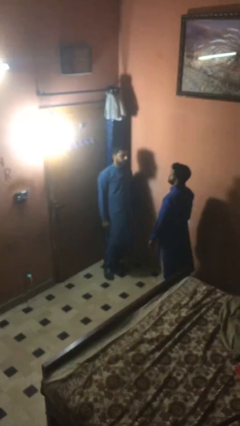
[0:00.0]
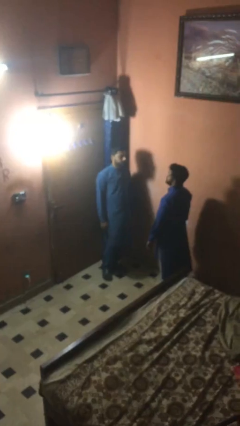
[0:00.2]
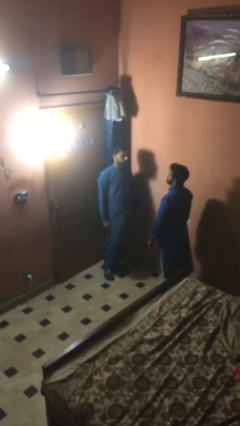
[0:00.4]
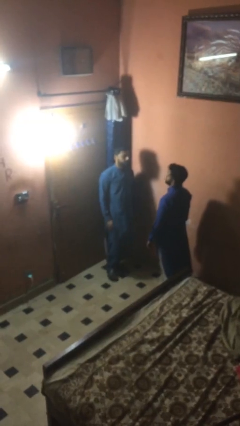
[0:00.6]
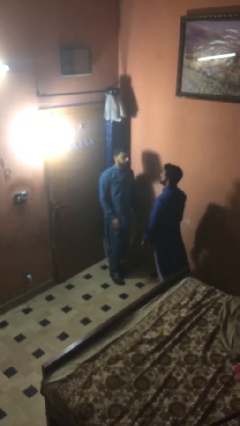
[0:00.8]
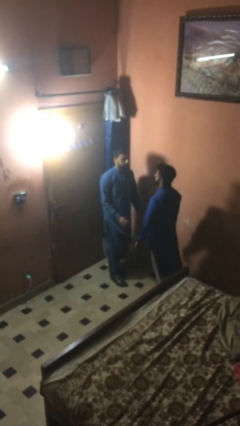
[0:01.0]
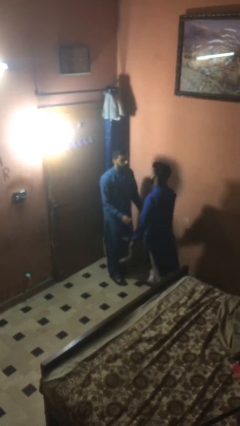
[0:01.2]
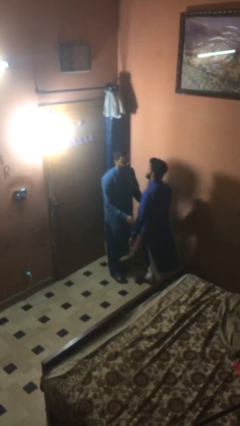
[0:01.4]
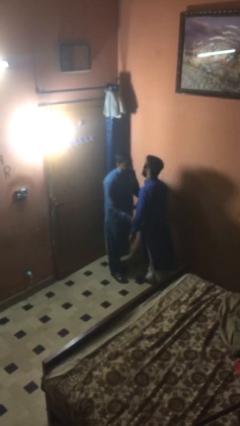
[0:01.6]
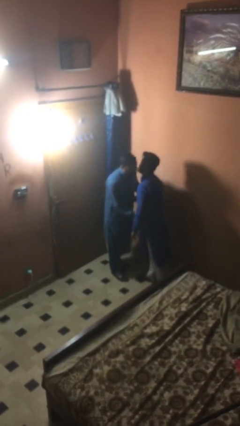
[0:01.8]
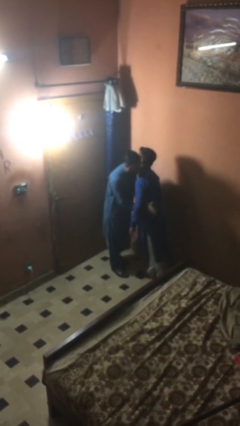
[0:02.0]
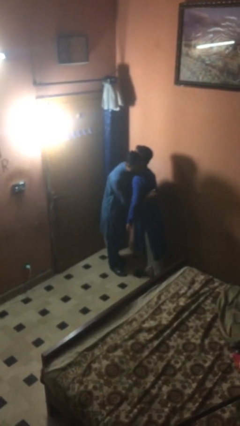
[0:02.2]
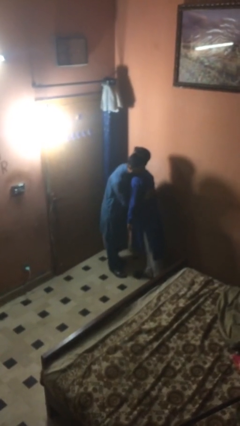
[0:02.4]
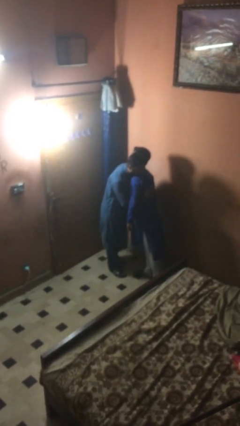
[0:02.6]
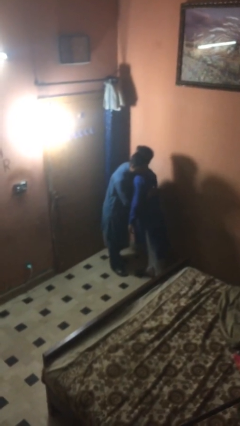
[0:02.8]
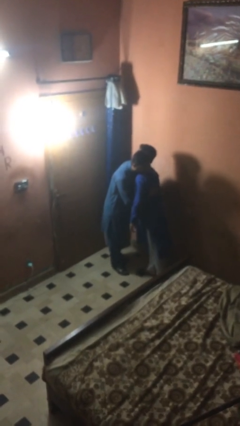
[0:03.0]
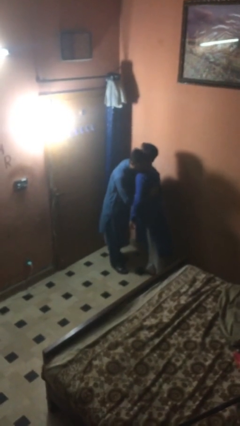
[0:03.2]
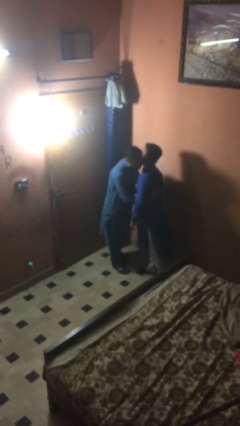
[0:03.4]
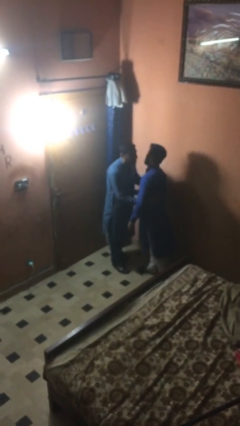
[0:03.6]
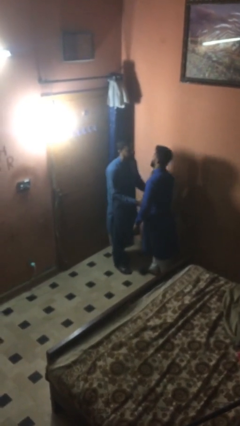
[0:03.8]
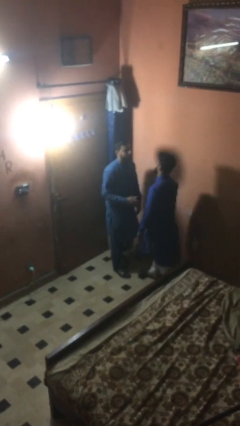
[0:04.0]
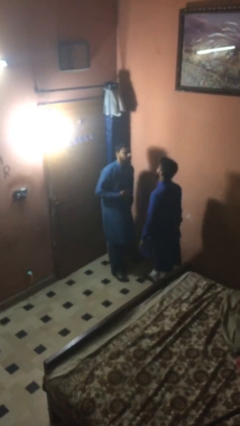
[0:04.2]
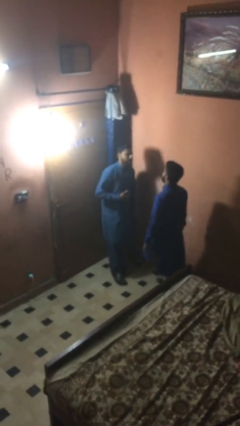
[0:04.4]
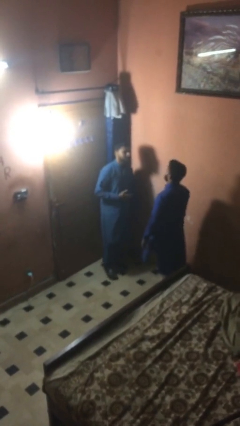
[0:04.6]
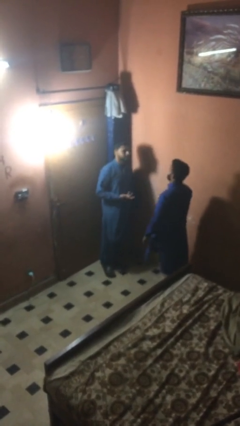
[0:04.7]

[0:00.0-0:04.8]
person embraces person

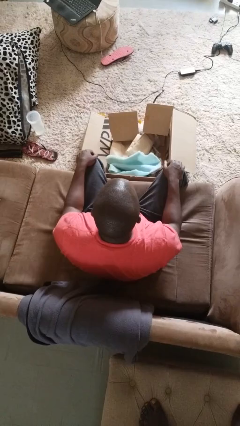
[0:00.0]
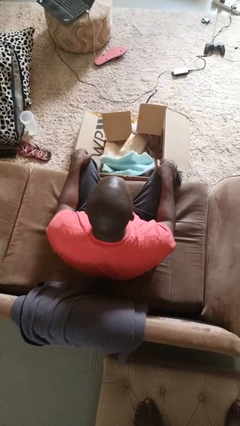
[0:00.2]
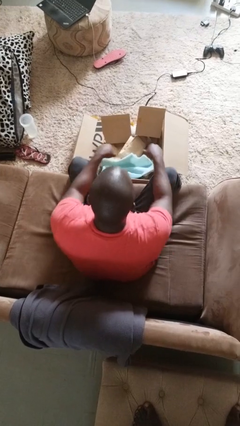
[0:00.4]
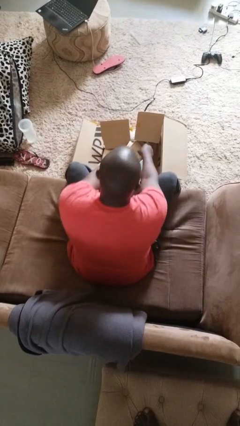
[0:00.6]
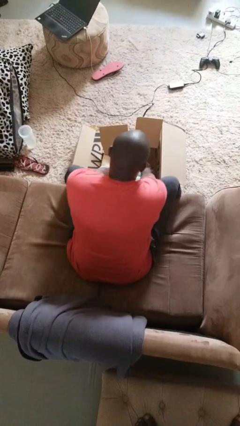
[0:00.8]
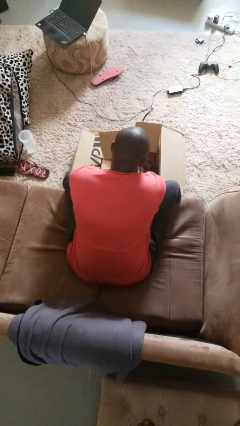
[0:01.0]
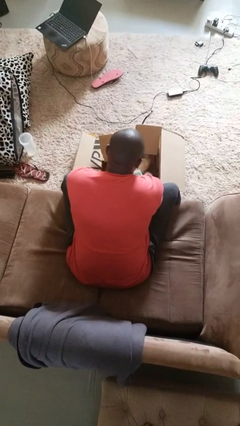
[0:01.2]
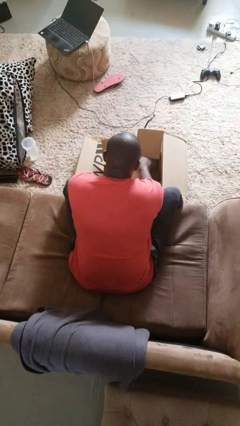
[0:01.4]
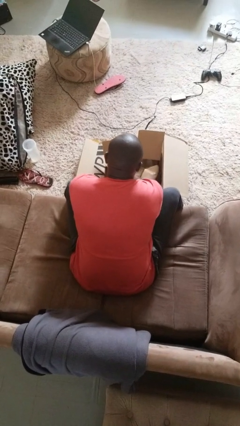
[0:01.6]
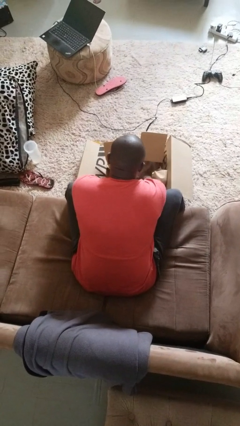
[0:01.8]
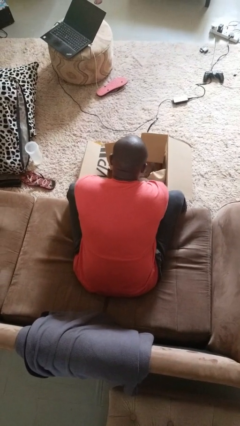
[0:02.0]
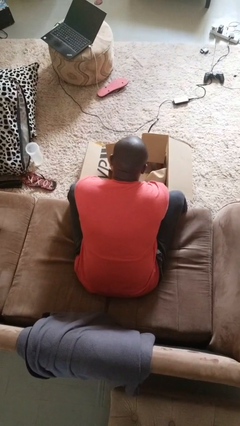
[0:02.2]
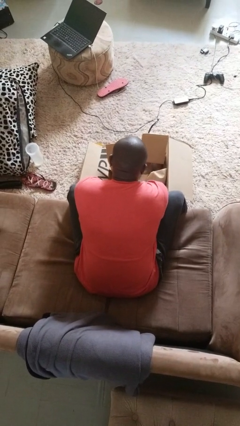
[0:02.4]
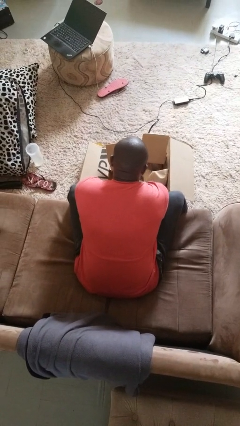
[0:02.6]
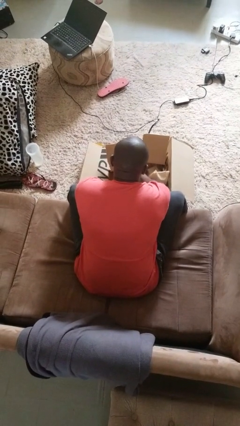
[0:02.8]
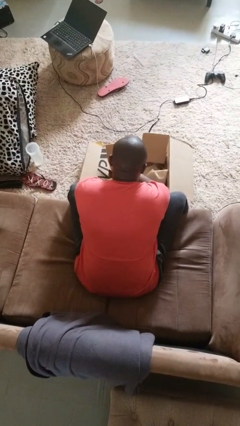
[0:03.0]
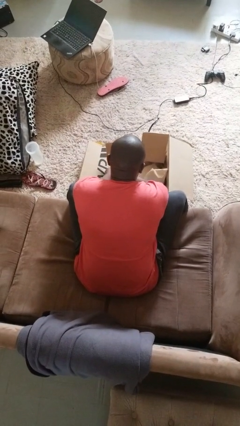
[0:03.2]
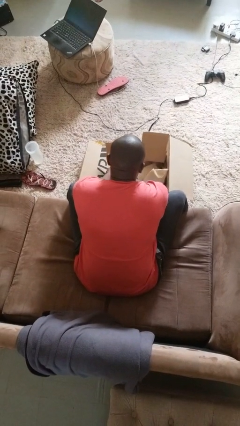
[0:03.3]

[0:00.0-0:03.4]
person searches in box

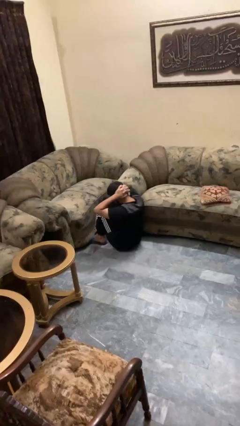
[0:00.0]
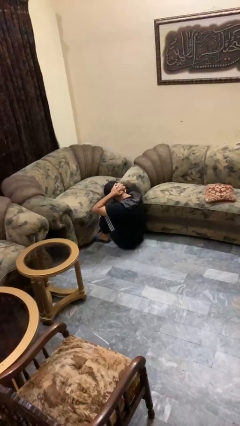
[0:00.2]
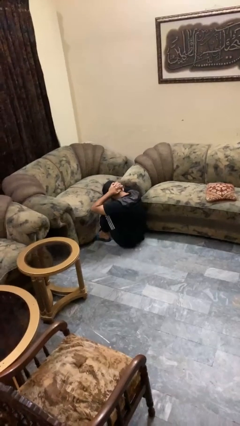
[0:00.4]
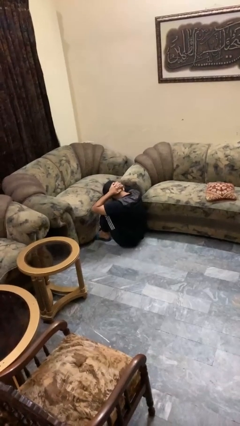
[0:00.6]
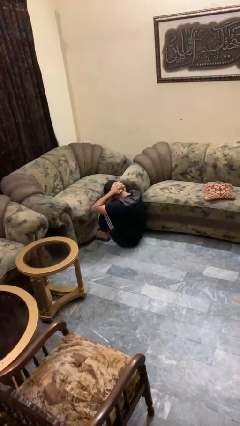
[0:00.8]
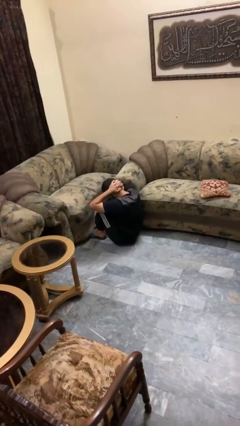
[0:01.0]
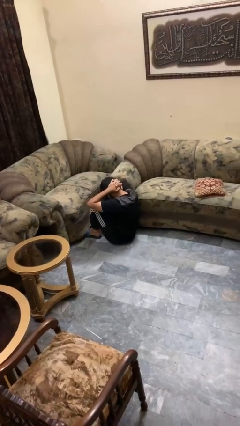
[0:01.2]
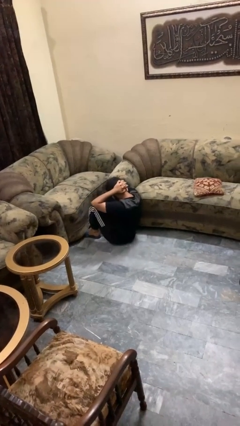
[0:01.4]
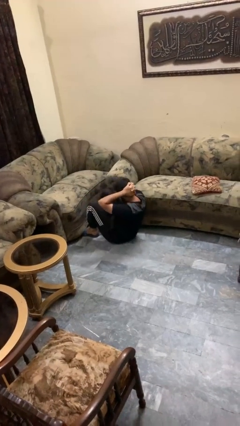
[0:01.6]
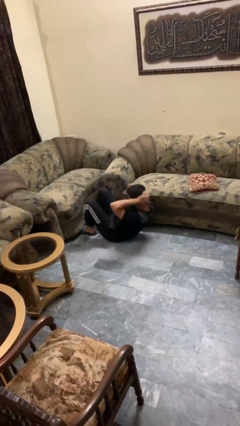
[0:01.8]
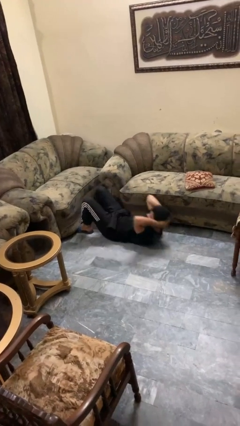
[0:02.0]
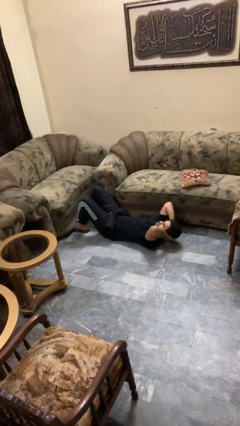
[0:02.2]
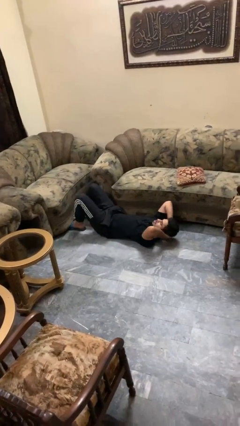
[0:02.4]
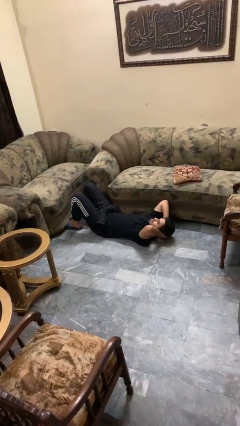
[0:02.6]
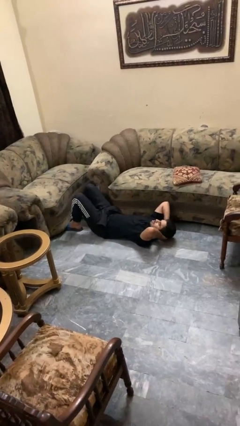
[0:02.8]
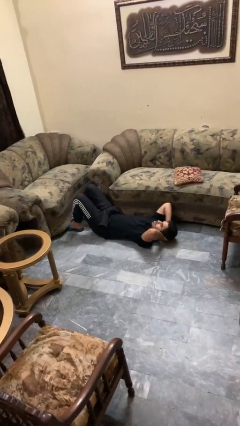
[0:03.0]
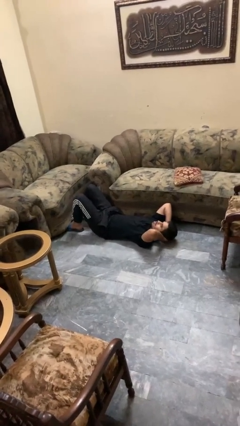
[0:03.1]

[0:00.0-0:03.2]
person exercises with situp

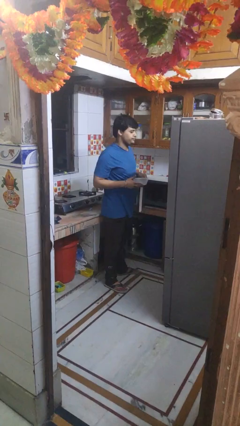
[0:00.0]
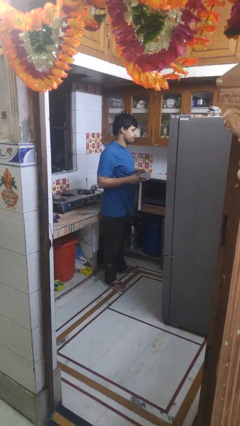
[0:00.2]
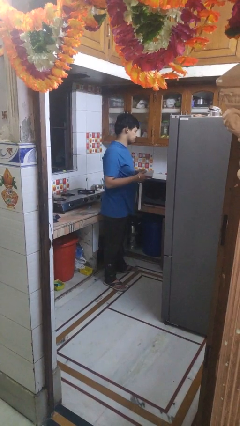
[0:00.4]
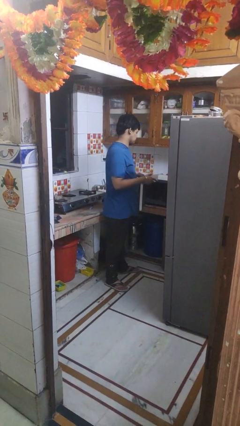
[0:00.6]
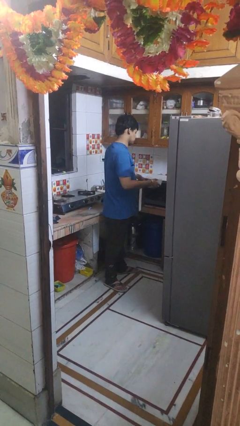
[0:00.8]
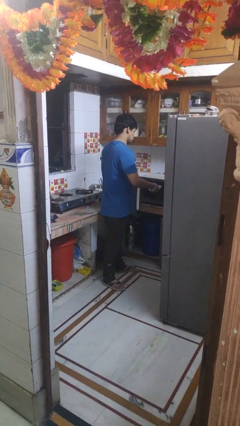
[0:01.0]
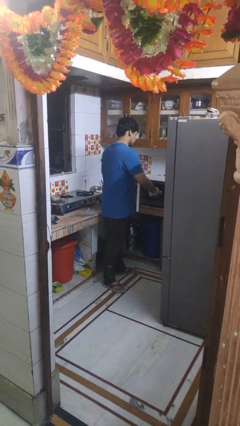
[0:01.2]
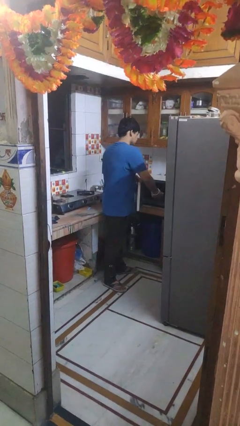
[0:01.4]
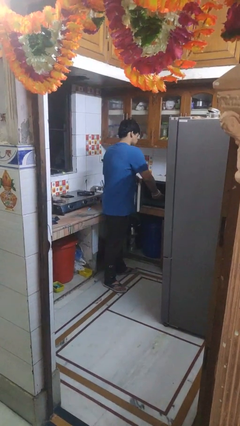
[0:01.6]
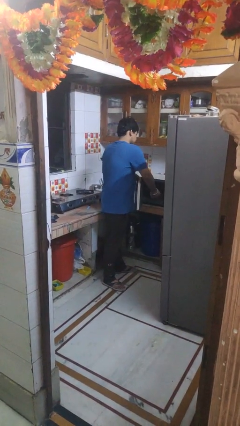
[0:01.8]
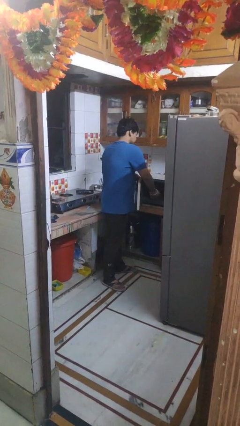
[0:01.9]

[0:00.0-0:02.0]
person puts object into microwave

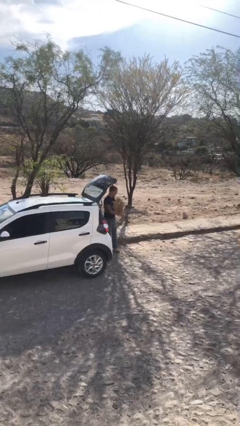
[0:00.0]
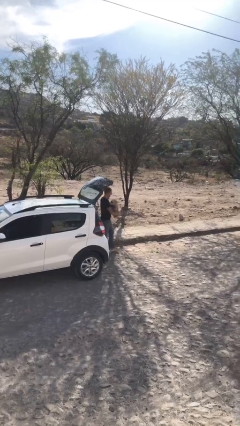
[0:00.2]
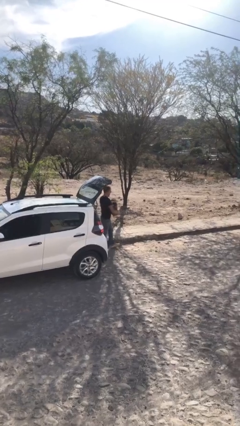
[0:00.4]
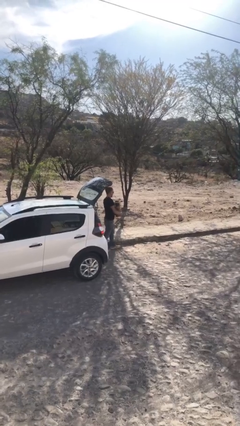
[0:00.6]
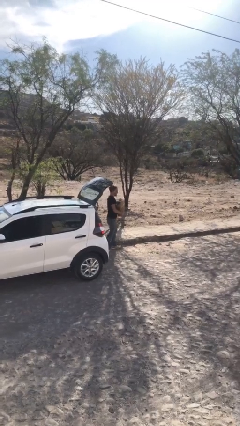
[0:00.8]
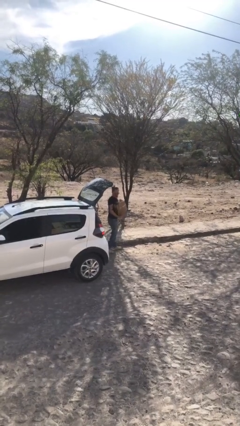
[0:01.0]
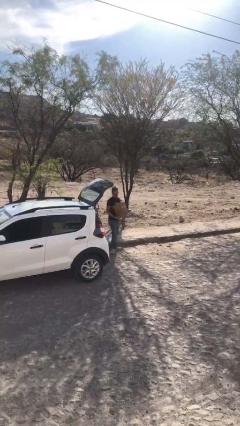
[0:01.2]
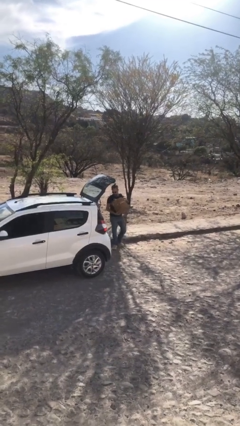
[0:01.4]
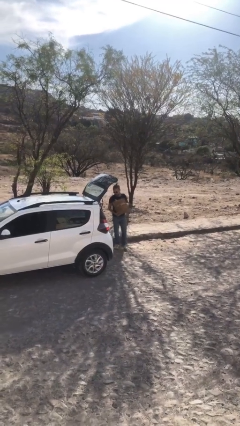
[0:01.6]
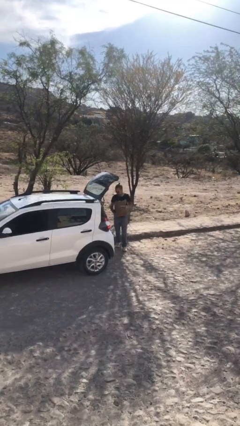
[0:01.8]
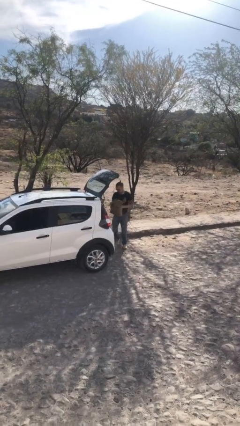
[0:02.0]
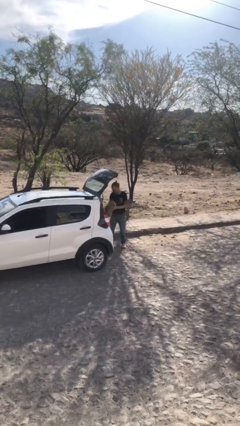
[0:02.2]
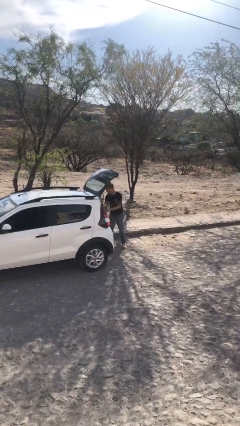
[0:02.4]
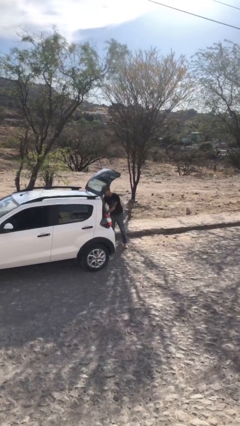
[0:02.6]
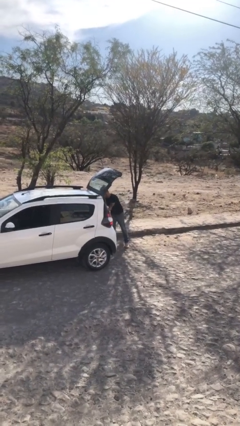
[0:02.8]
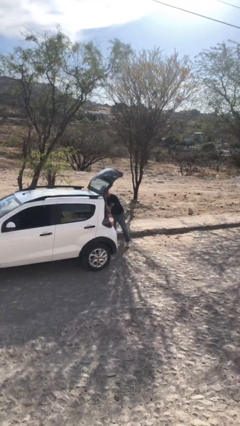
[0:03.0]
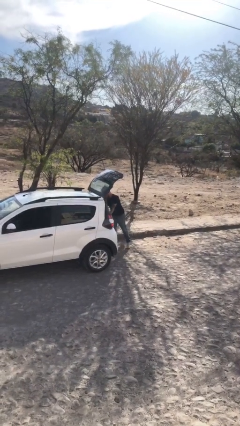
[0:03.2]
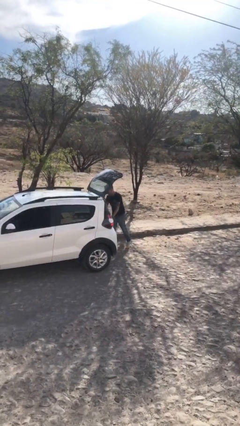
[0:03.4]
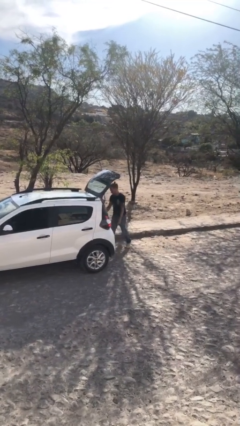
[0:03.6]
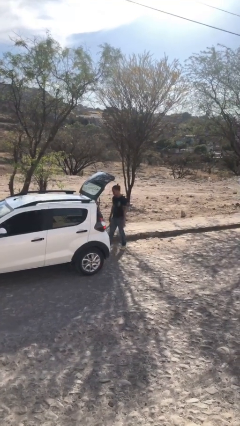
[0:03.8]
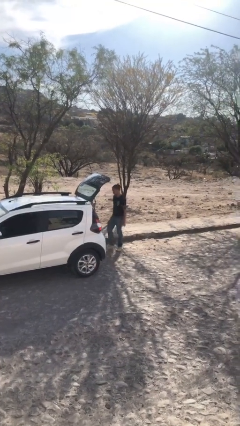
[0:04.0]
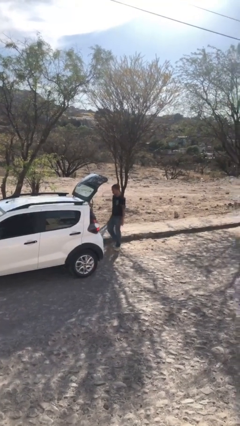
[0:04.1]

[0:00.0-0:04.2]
person loads car
